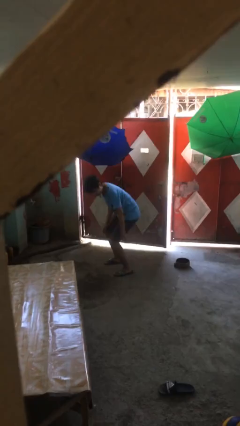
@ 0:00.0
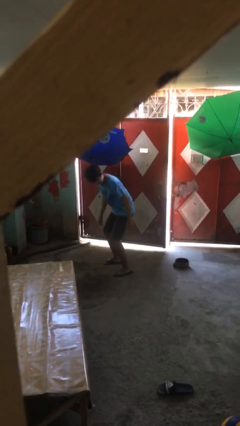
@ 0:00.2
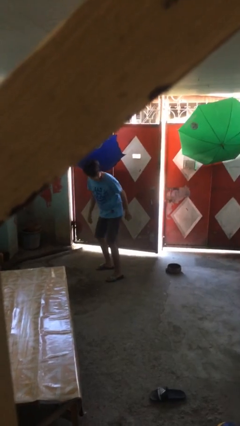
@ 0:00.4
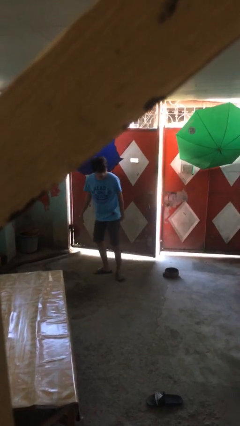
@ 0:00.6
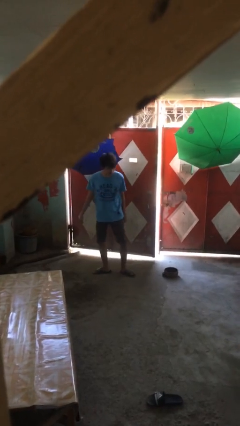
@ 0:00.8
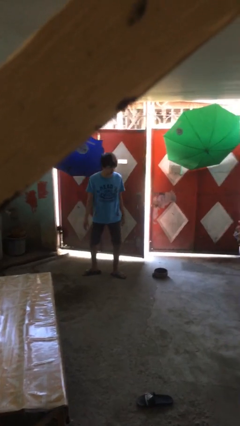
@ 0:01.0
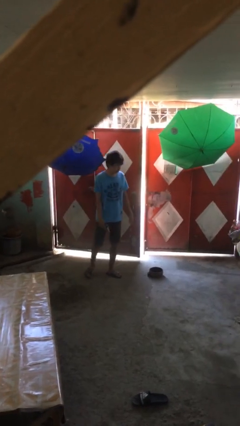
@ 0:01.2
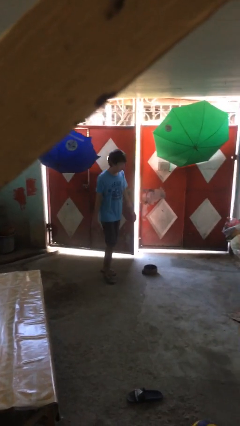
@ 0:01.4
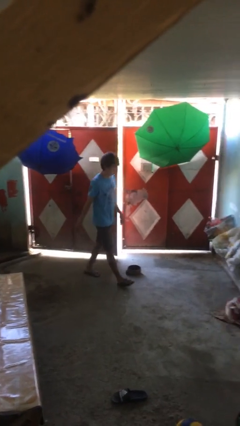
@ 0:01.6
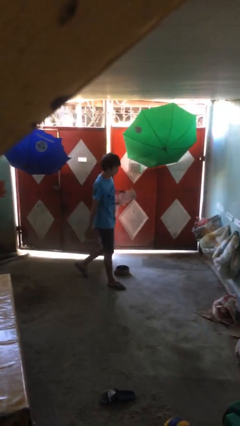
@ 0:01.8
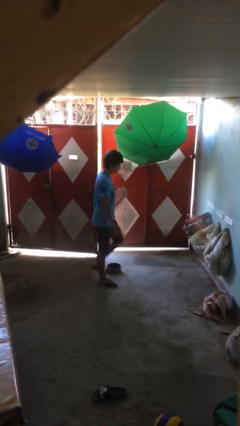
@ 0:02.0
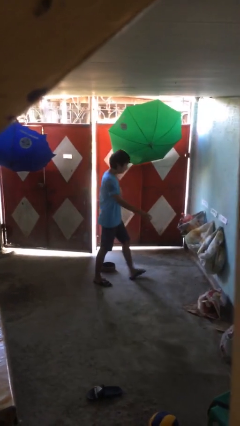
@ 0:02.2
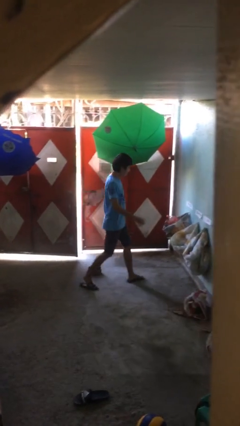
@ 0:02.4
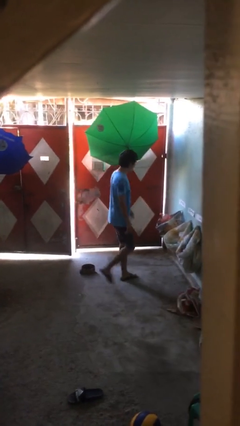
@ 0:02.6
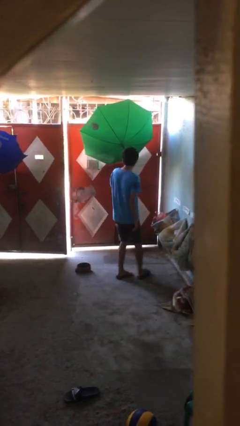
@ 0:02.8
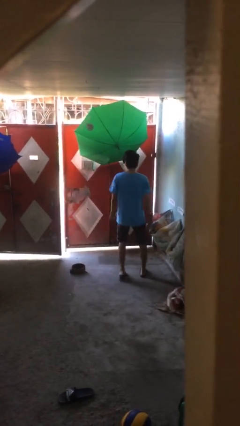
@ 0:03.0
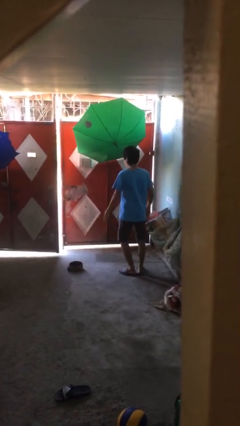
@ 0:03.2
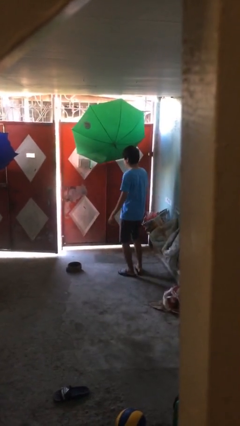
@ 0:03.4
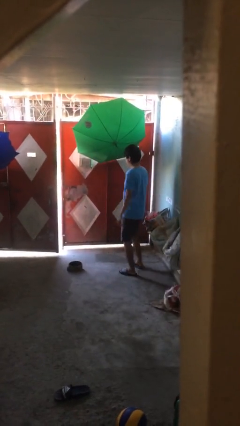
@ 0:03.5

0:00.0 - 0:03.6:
person stands up from floor

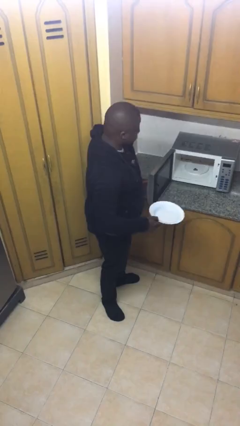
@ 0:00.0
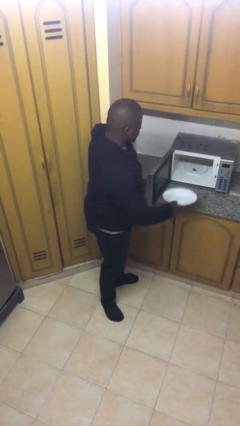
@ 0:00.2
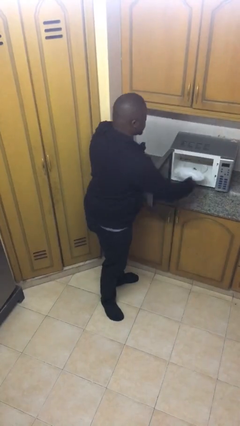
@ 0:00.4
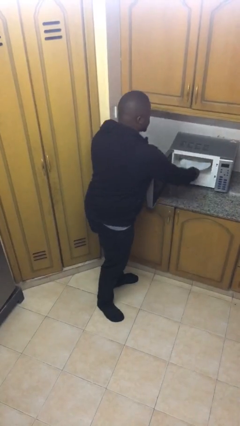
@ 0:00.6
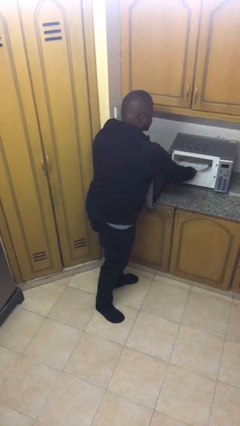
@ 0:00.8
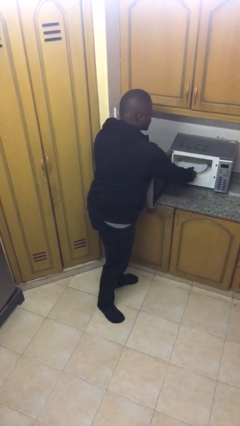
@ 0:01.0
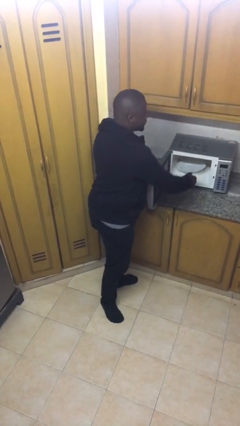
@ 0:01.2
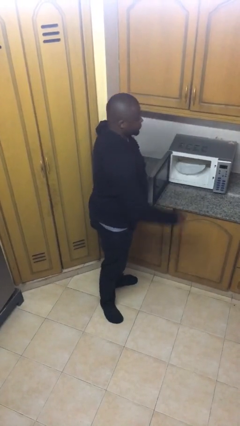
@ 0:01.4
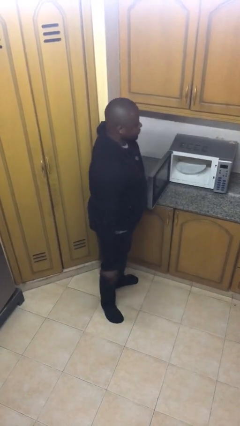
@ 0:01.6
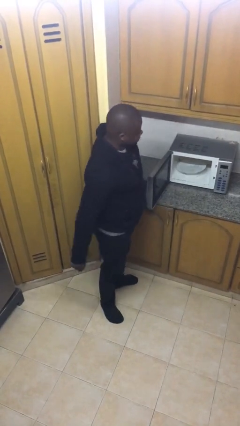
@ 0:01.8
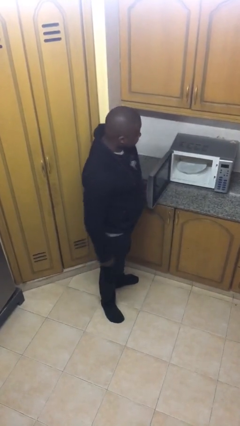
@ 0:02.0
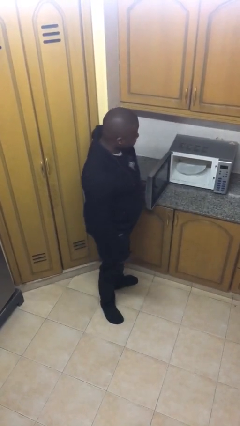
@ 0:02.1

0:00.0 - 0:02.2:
person puts object into microwave

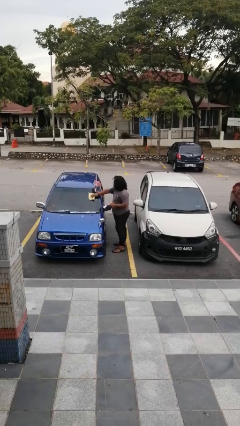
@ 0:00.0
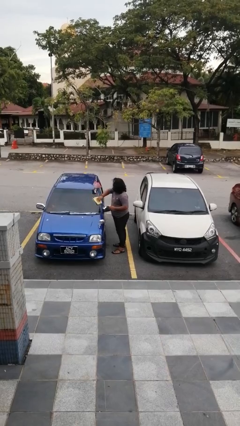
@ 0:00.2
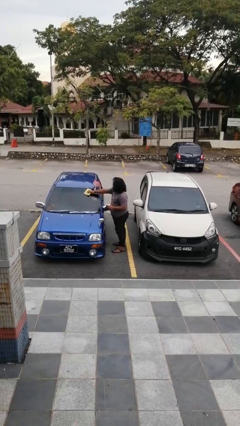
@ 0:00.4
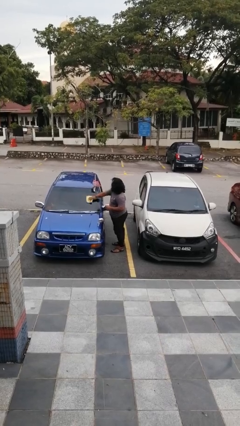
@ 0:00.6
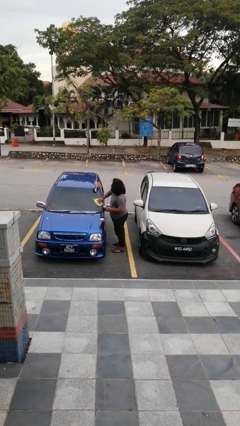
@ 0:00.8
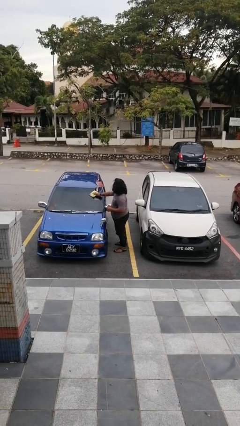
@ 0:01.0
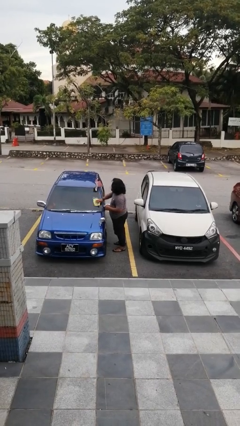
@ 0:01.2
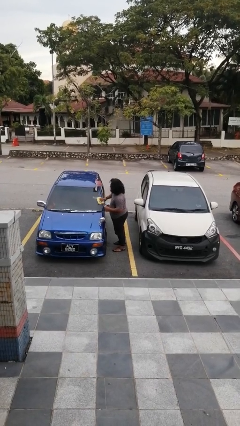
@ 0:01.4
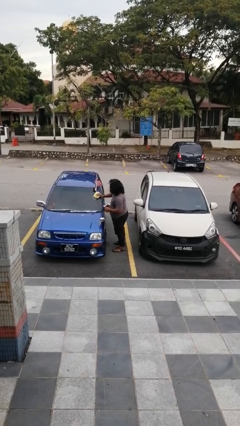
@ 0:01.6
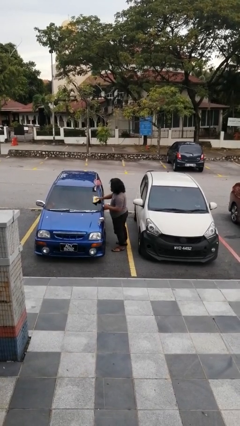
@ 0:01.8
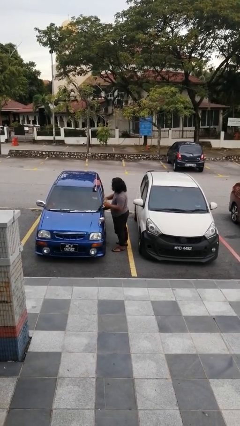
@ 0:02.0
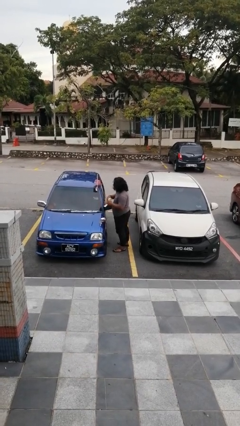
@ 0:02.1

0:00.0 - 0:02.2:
person polishes car with rag

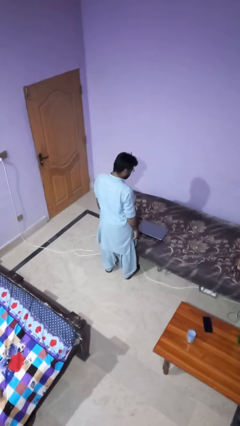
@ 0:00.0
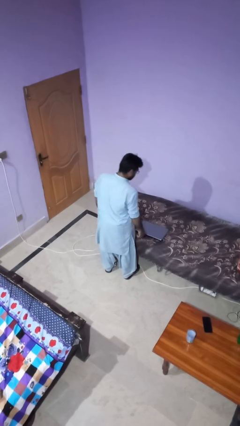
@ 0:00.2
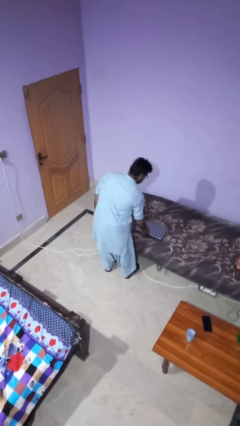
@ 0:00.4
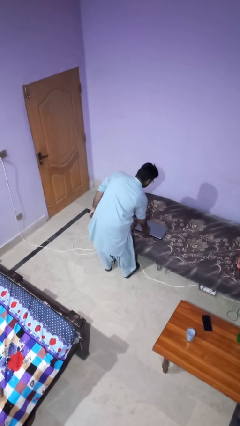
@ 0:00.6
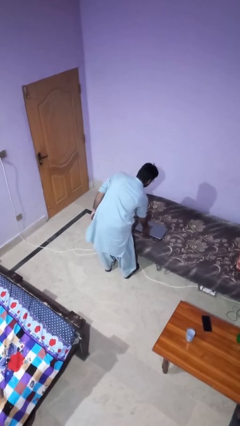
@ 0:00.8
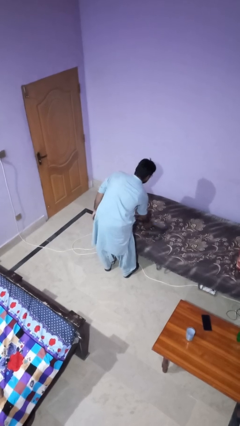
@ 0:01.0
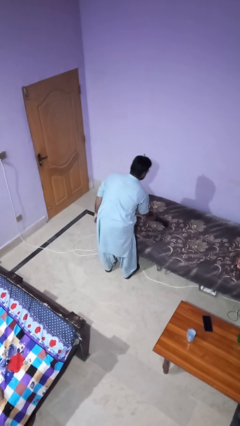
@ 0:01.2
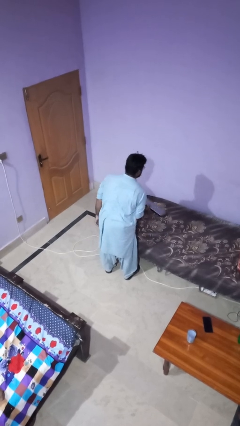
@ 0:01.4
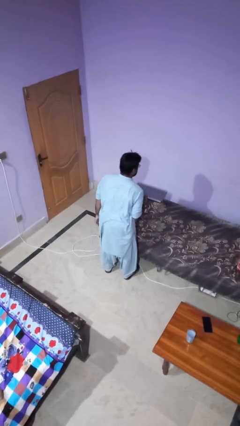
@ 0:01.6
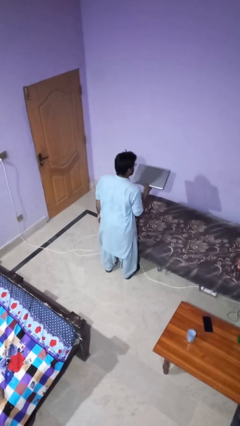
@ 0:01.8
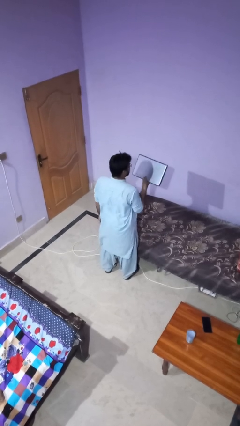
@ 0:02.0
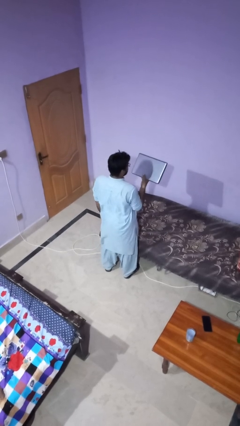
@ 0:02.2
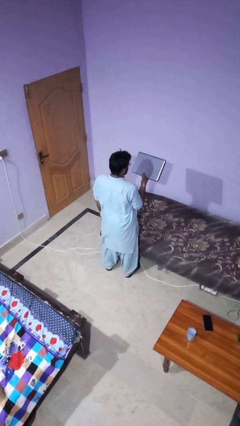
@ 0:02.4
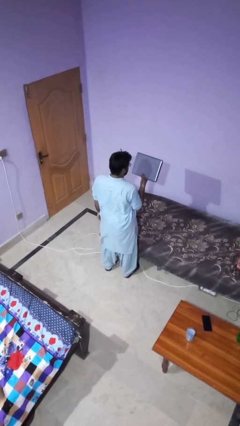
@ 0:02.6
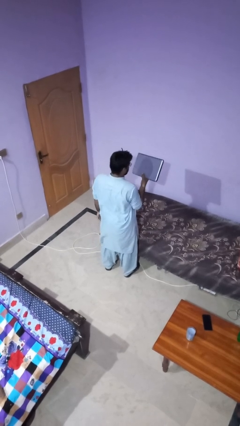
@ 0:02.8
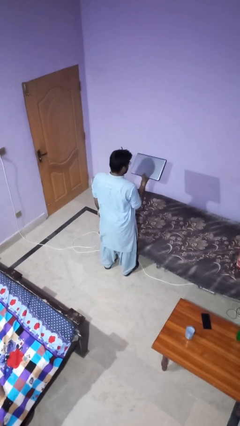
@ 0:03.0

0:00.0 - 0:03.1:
person picks up object from bed

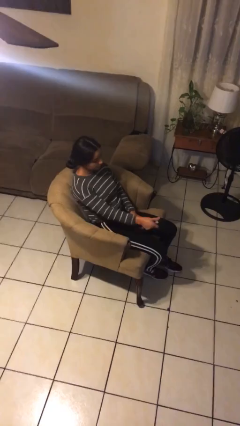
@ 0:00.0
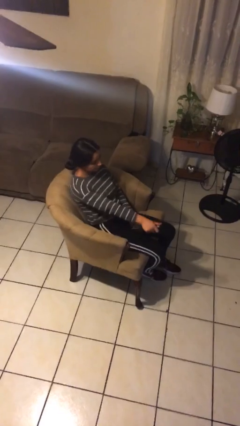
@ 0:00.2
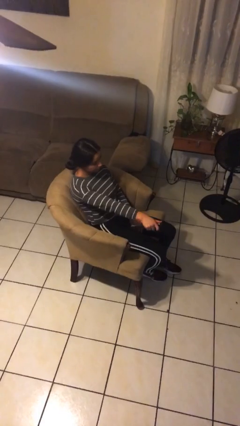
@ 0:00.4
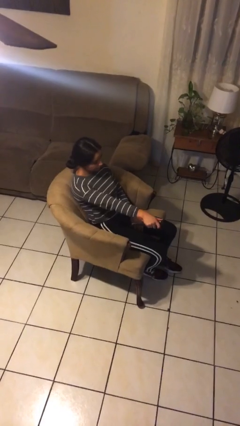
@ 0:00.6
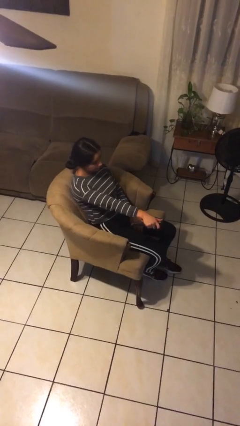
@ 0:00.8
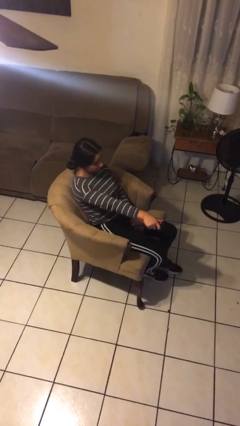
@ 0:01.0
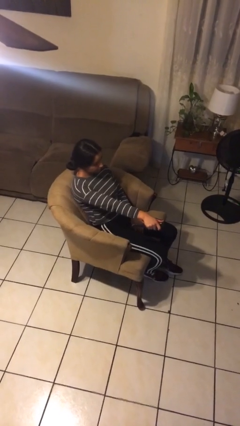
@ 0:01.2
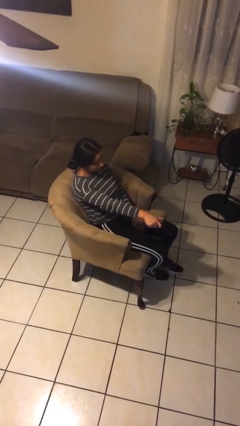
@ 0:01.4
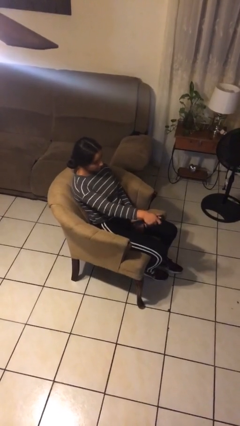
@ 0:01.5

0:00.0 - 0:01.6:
person uses television remote

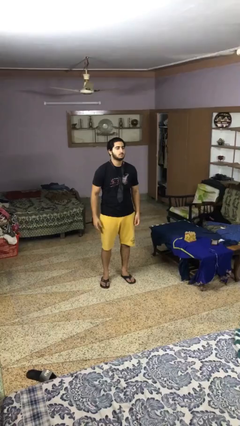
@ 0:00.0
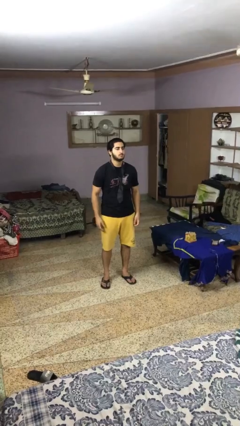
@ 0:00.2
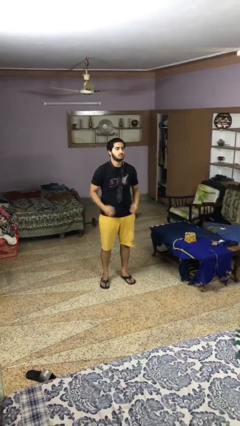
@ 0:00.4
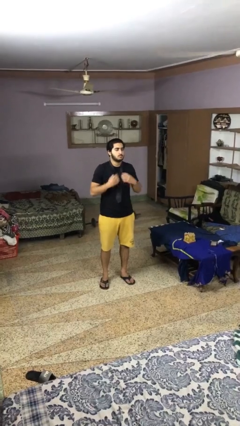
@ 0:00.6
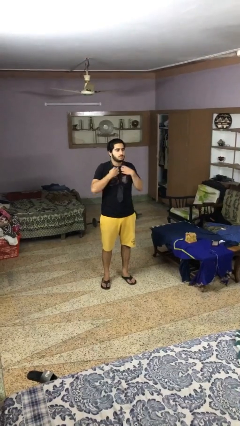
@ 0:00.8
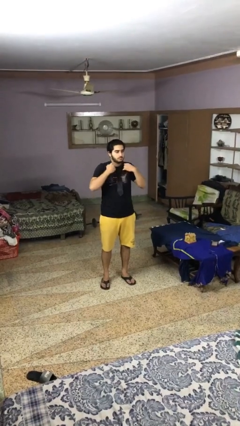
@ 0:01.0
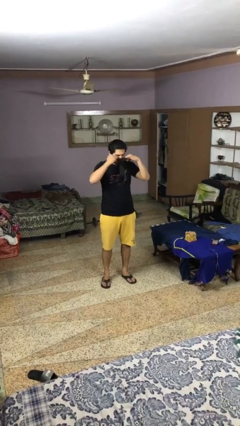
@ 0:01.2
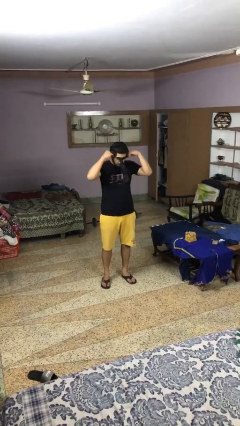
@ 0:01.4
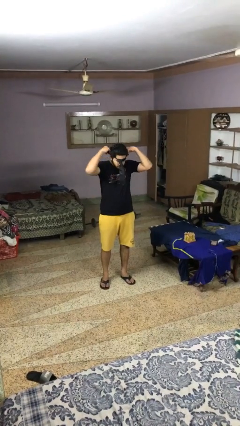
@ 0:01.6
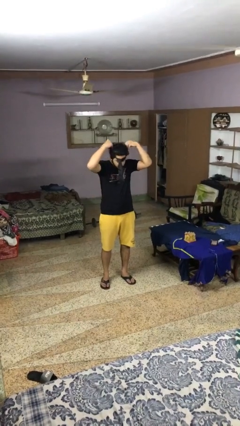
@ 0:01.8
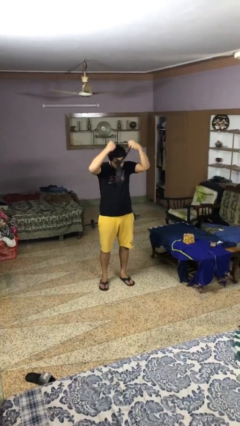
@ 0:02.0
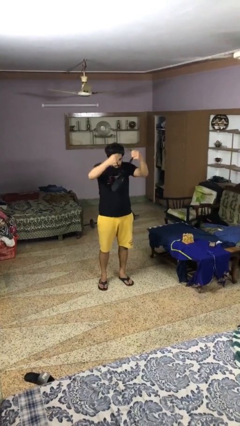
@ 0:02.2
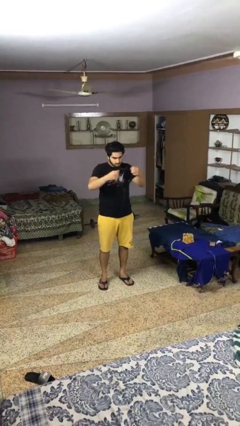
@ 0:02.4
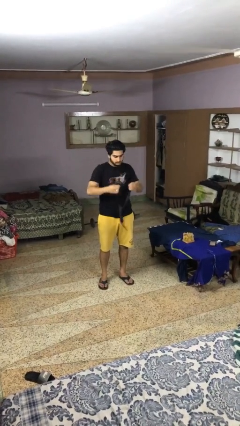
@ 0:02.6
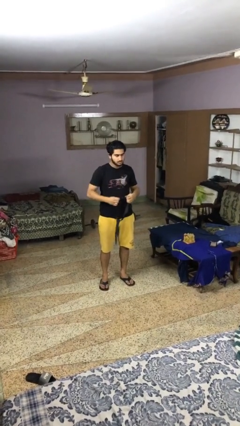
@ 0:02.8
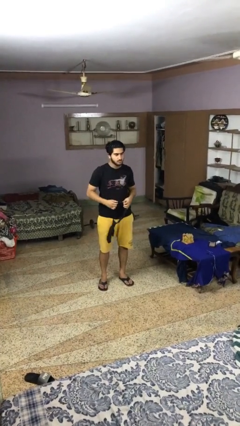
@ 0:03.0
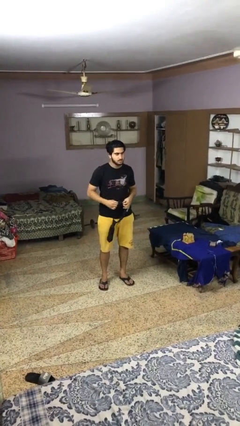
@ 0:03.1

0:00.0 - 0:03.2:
person takes off necktie

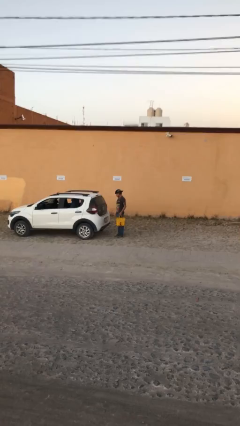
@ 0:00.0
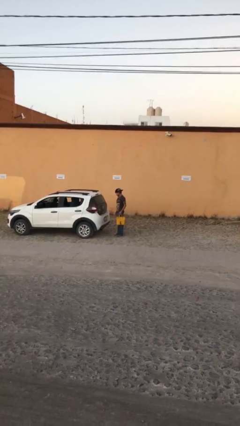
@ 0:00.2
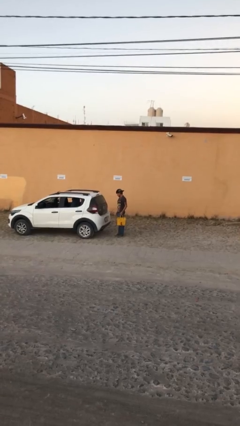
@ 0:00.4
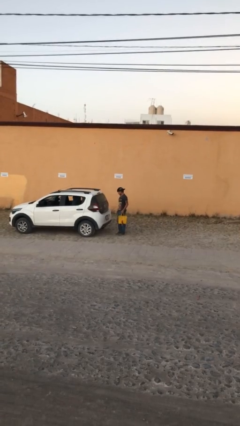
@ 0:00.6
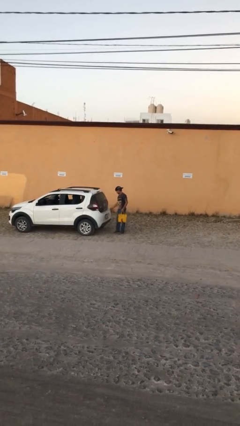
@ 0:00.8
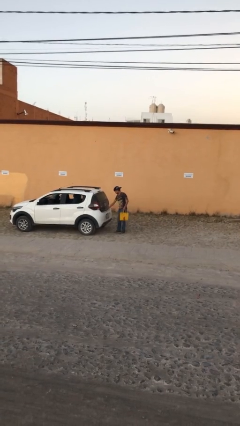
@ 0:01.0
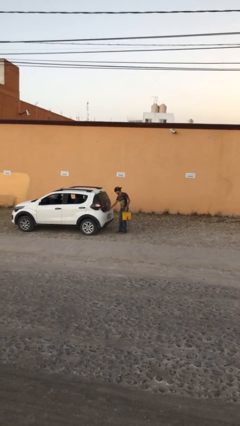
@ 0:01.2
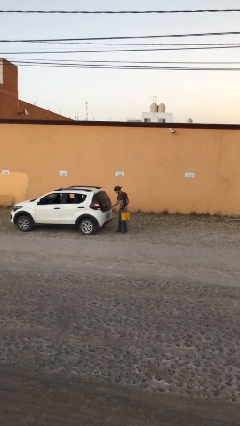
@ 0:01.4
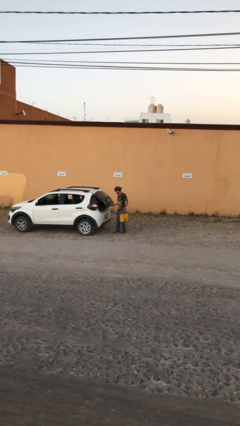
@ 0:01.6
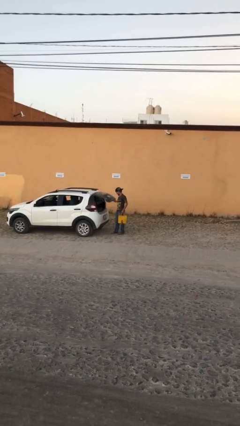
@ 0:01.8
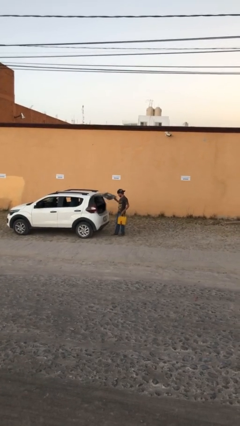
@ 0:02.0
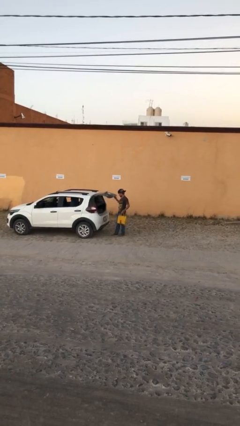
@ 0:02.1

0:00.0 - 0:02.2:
person opens car trunk
